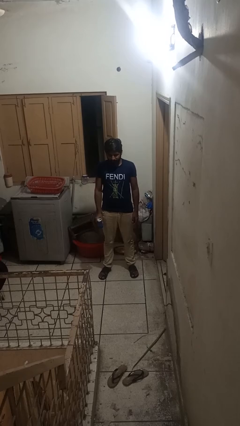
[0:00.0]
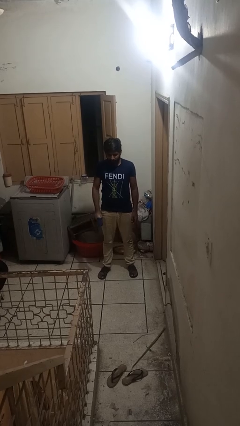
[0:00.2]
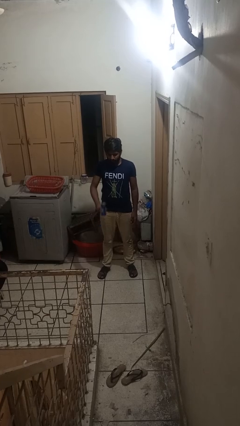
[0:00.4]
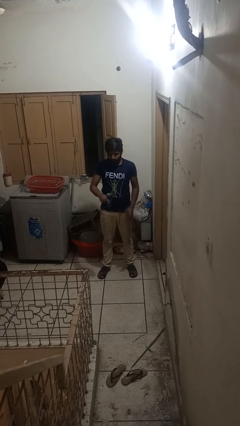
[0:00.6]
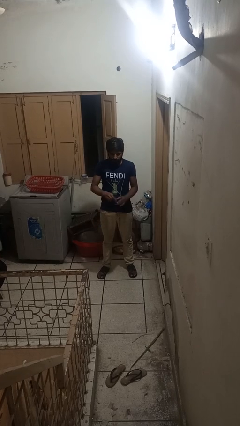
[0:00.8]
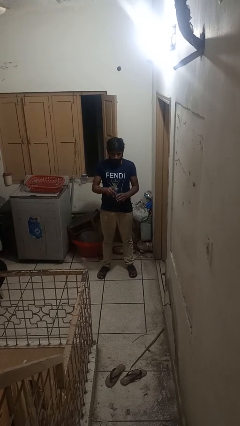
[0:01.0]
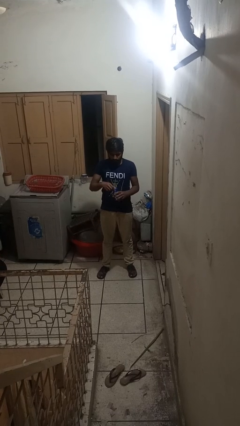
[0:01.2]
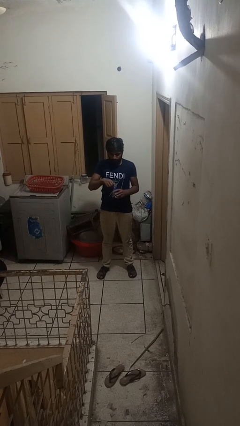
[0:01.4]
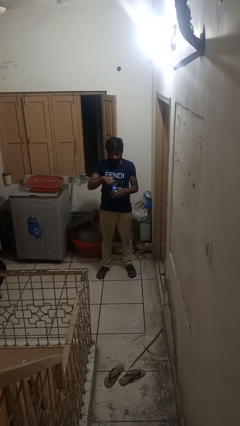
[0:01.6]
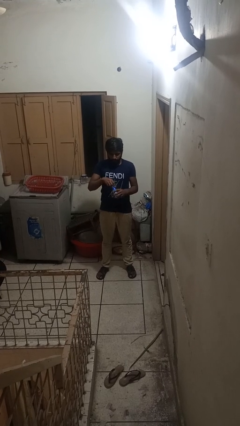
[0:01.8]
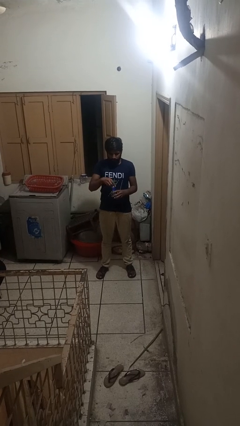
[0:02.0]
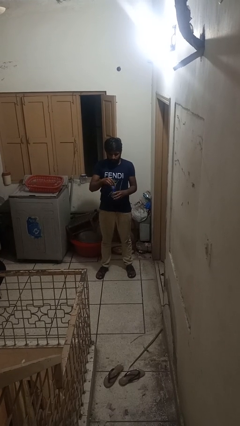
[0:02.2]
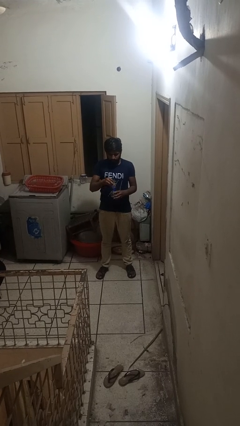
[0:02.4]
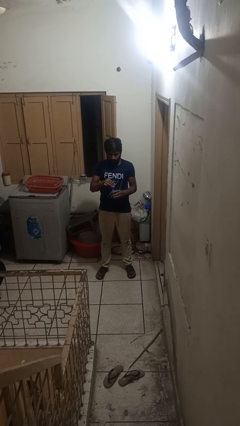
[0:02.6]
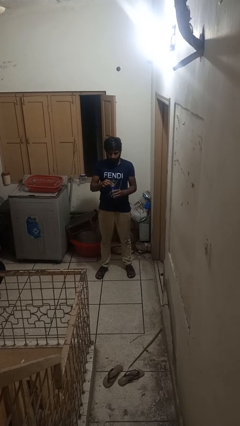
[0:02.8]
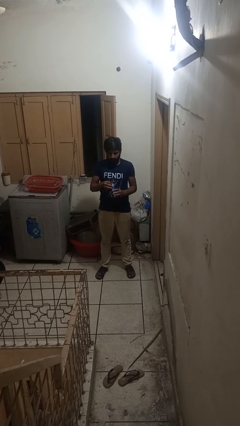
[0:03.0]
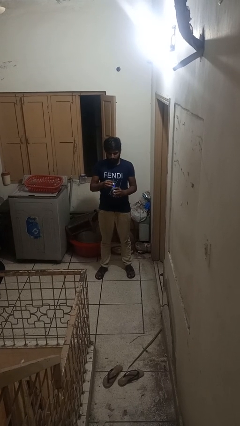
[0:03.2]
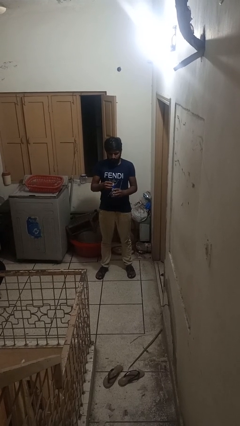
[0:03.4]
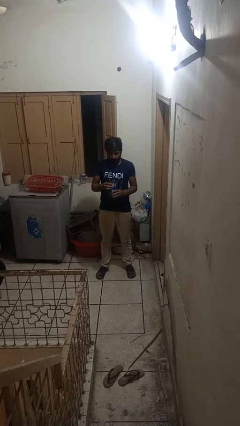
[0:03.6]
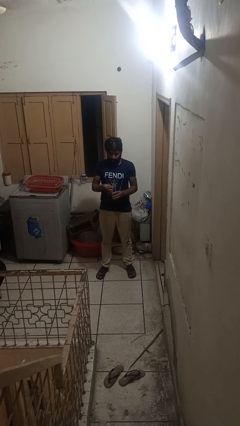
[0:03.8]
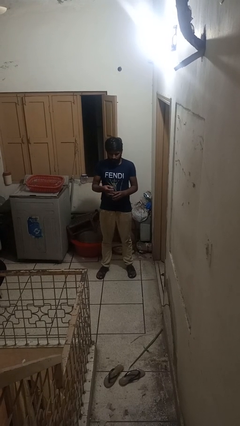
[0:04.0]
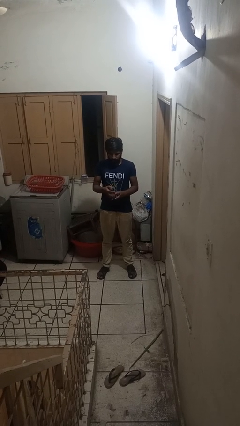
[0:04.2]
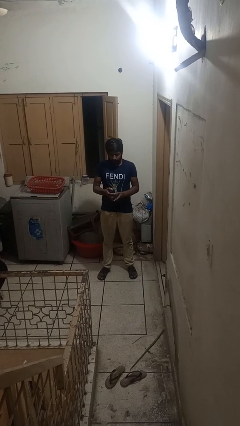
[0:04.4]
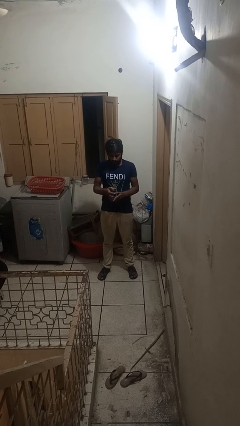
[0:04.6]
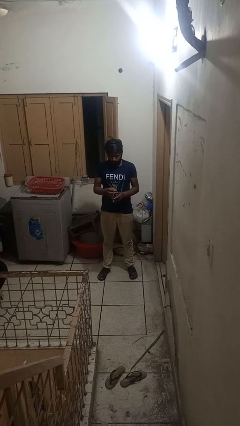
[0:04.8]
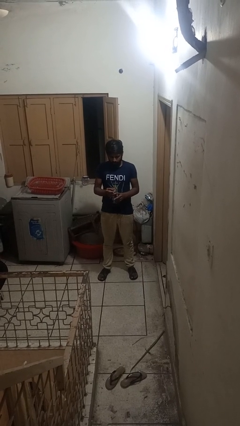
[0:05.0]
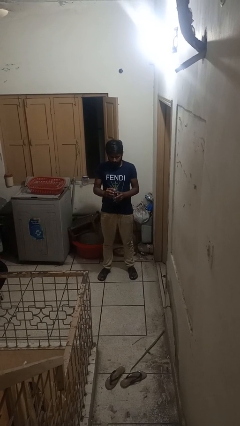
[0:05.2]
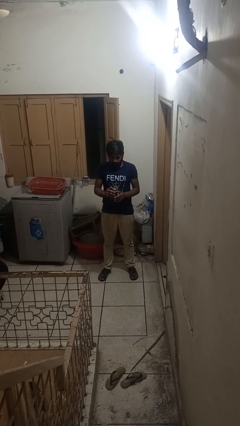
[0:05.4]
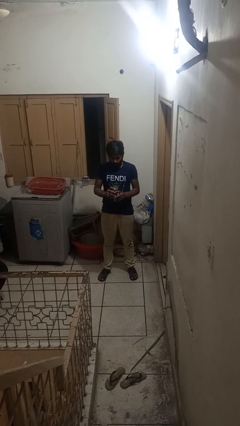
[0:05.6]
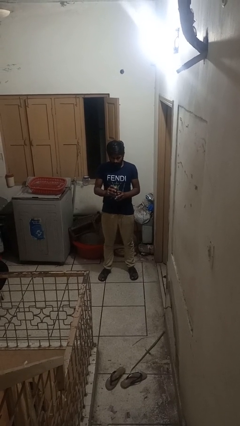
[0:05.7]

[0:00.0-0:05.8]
person opens beverage can

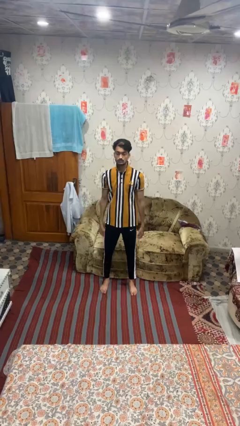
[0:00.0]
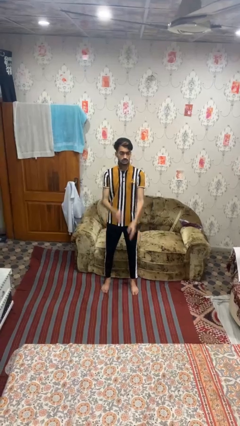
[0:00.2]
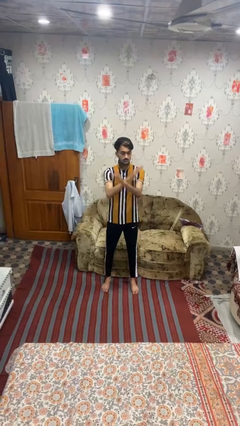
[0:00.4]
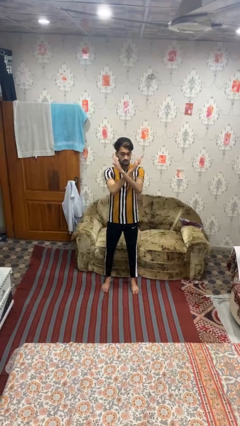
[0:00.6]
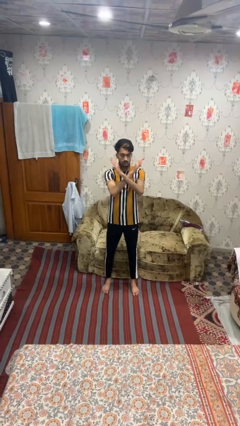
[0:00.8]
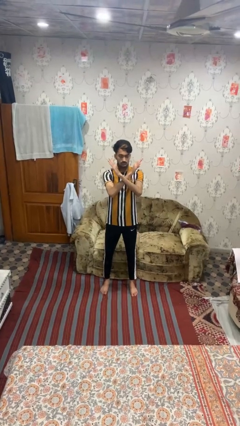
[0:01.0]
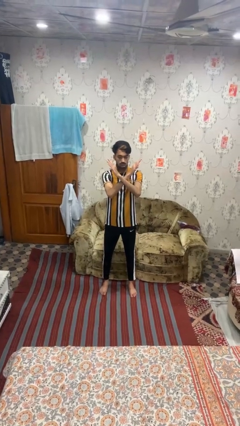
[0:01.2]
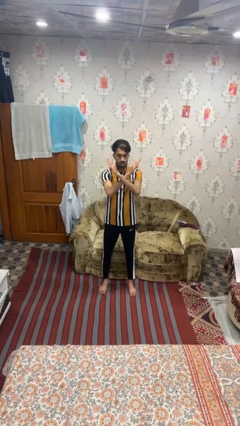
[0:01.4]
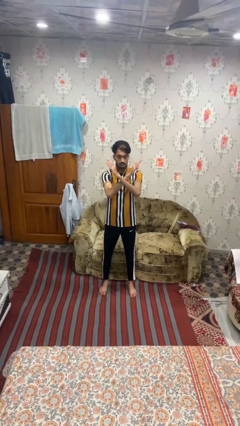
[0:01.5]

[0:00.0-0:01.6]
person gestures arms x

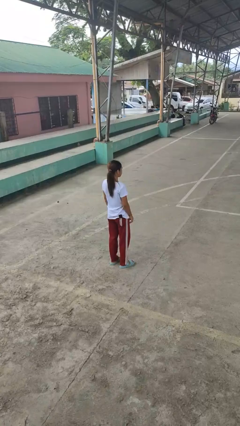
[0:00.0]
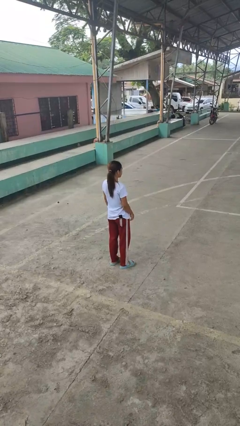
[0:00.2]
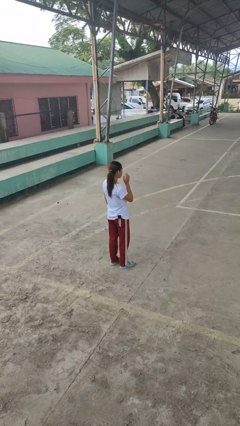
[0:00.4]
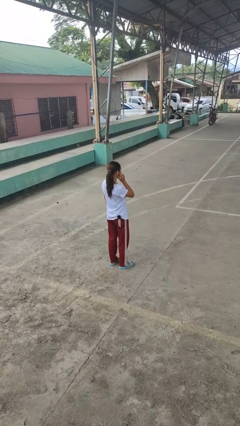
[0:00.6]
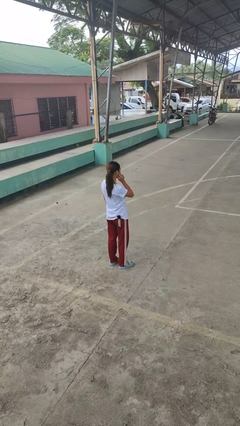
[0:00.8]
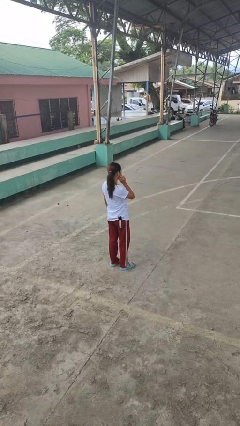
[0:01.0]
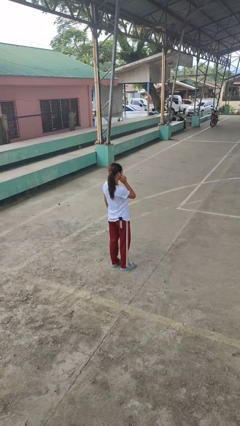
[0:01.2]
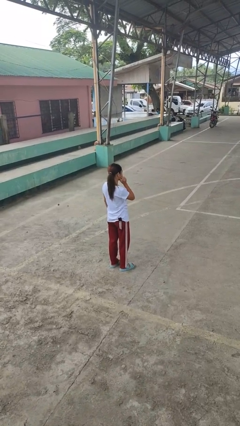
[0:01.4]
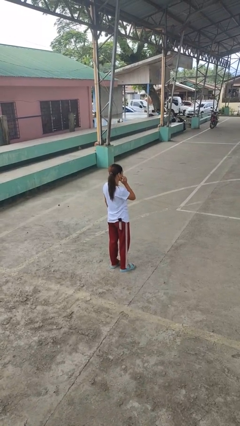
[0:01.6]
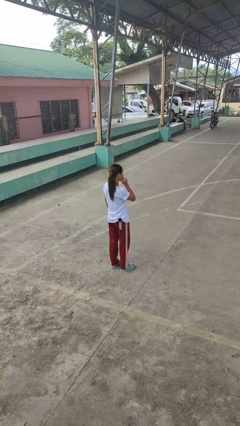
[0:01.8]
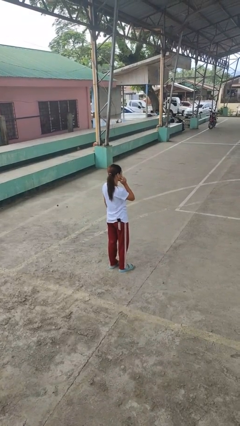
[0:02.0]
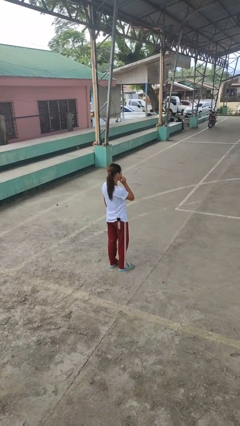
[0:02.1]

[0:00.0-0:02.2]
person scratches face

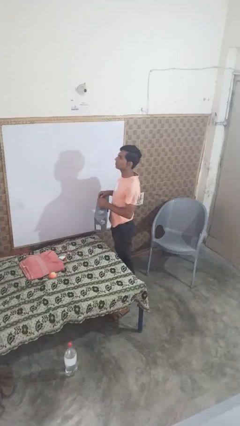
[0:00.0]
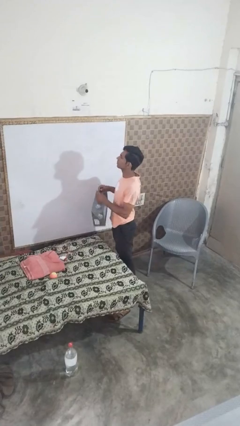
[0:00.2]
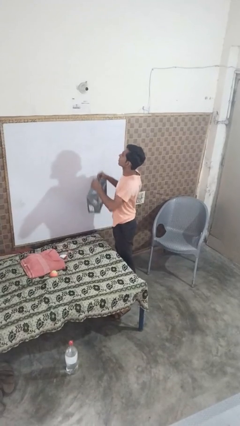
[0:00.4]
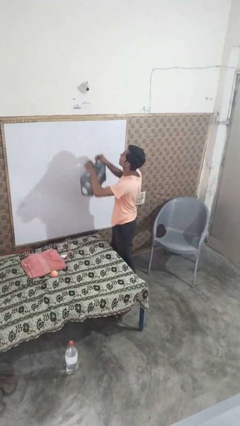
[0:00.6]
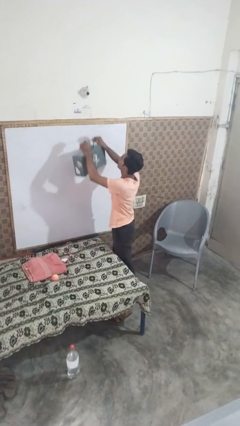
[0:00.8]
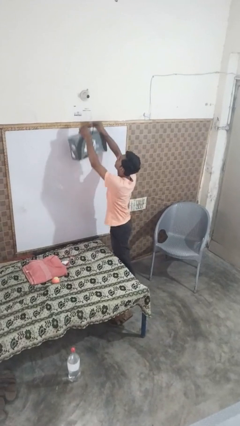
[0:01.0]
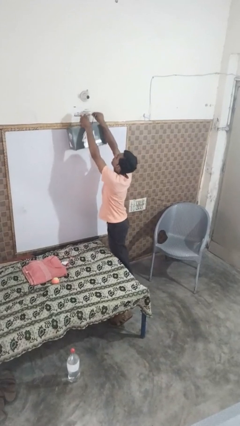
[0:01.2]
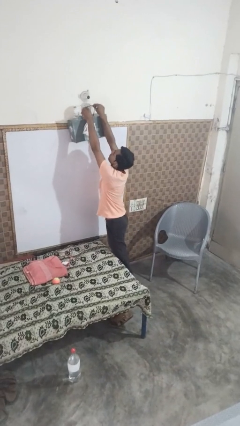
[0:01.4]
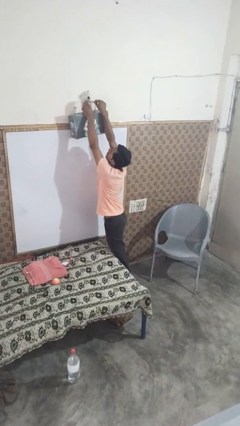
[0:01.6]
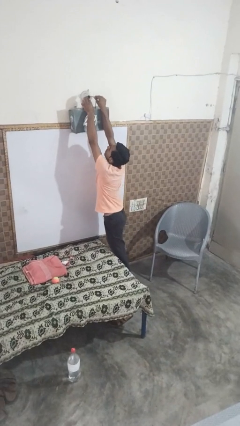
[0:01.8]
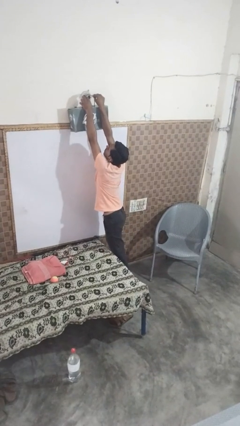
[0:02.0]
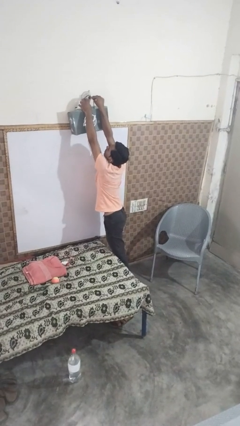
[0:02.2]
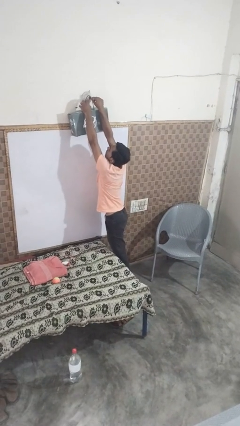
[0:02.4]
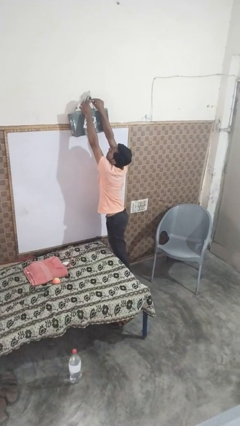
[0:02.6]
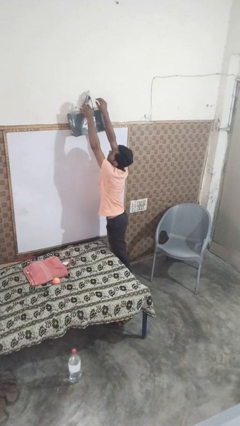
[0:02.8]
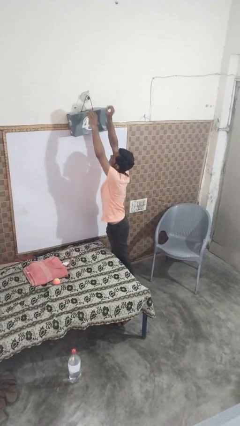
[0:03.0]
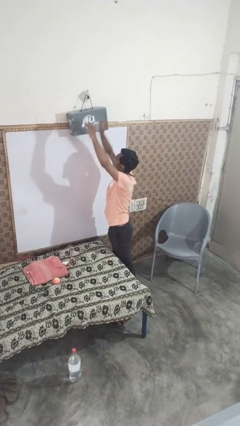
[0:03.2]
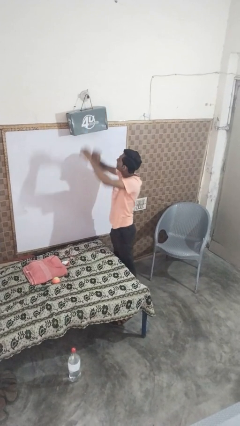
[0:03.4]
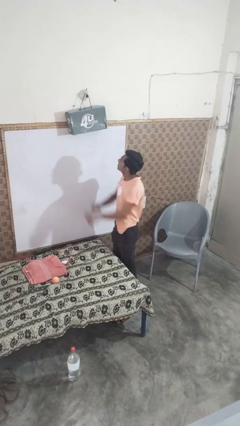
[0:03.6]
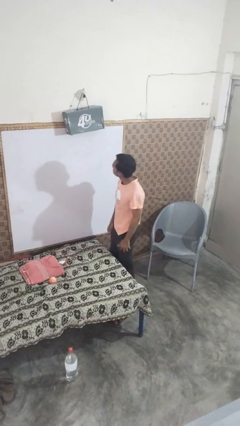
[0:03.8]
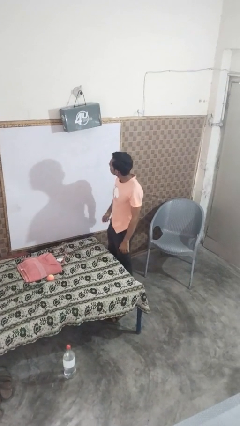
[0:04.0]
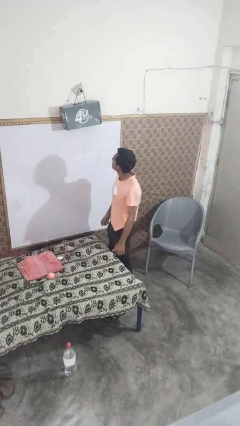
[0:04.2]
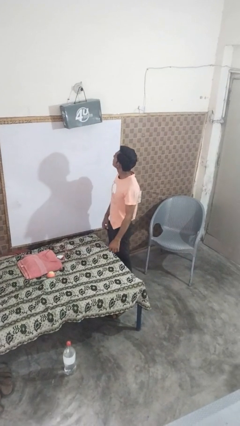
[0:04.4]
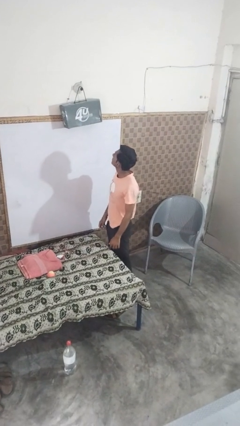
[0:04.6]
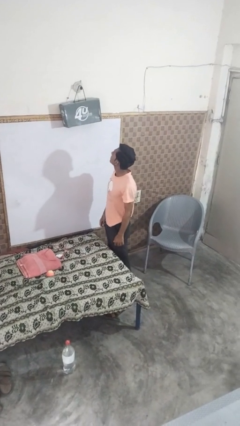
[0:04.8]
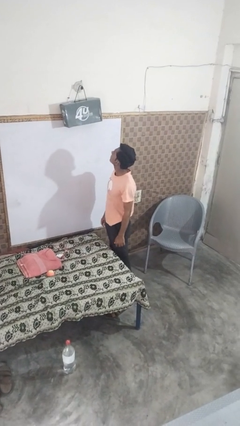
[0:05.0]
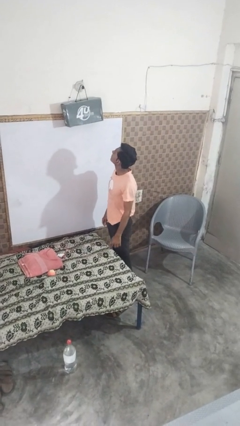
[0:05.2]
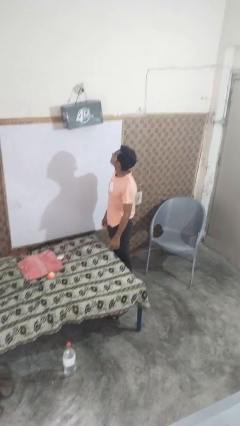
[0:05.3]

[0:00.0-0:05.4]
person puts up smoke detector

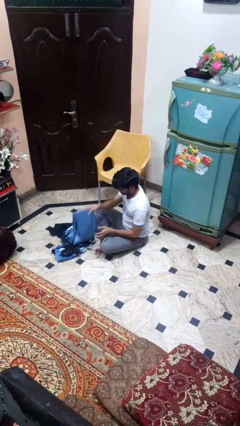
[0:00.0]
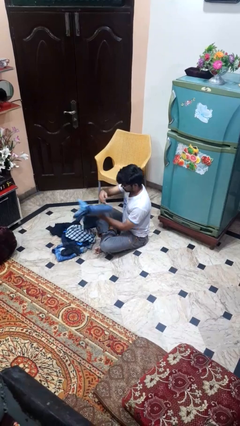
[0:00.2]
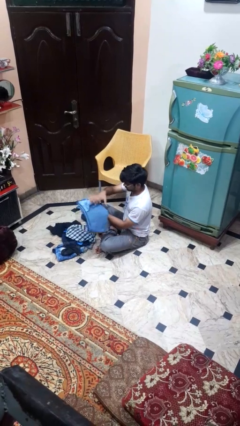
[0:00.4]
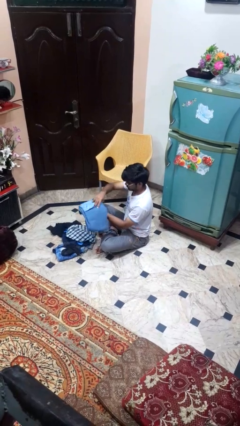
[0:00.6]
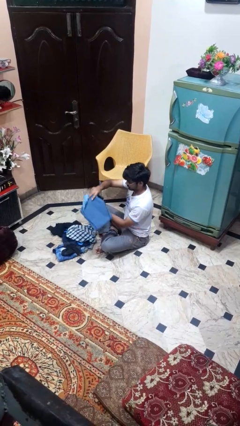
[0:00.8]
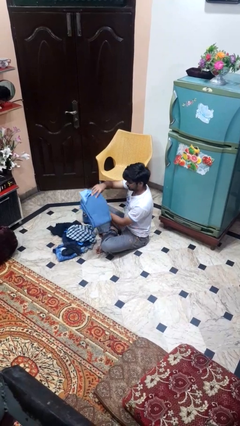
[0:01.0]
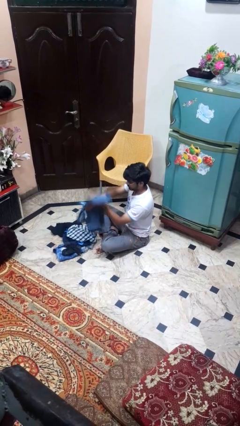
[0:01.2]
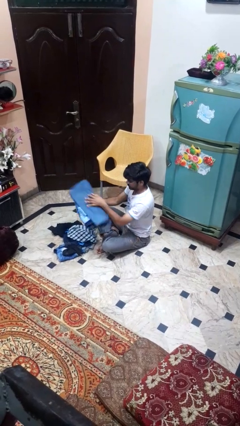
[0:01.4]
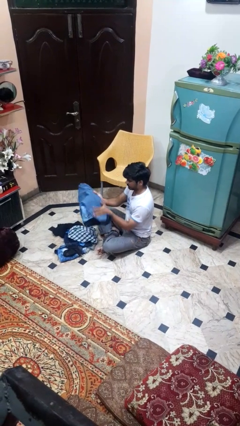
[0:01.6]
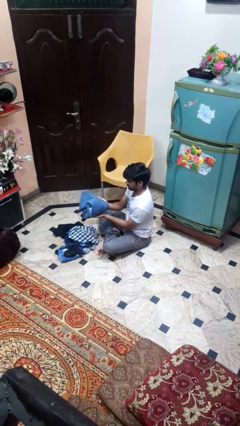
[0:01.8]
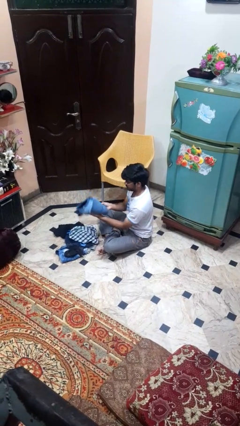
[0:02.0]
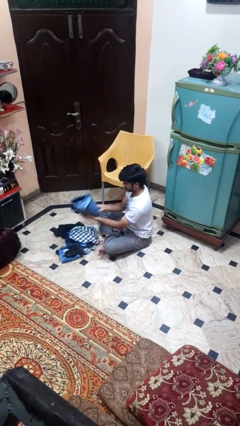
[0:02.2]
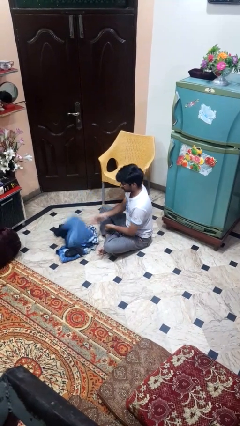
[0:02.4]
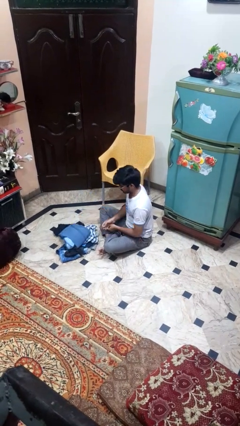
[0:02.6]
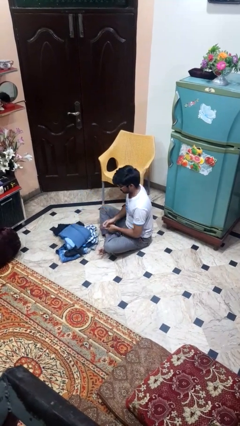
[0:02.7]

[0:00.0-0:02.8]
person folds pants

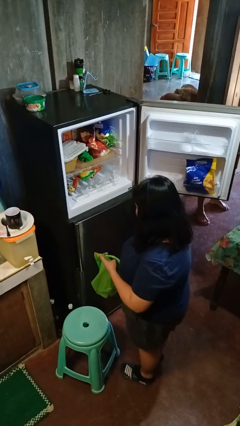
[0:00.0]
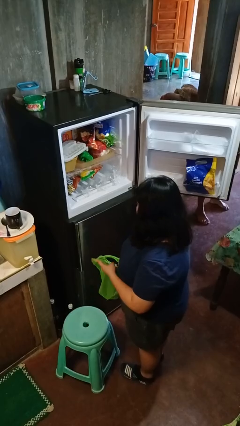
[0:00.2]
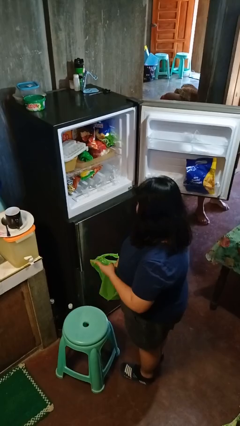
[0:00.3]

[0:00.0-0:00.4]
person loads groceries into refrigerator
